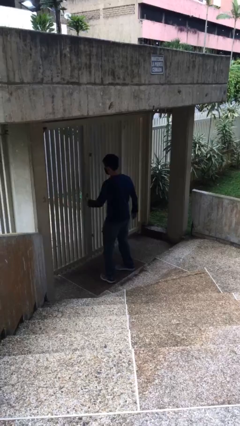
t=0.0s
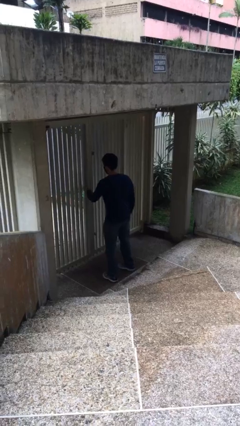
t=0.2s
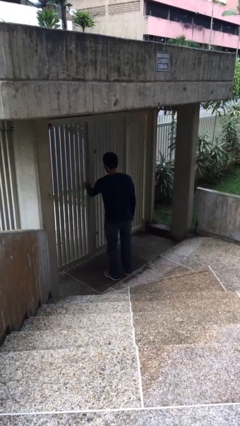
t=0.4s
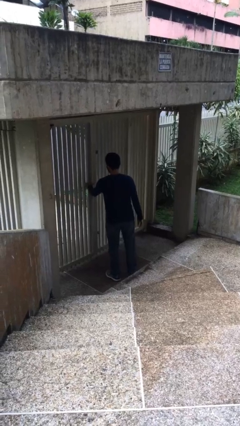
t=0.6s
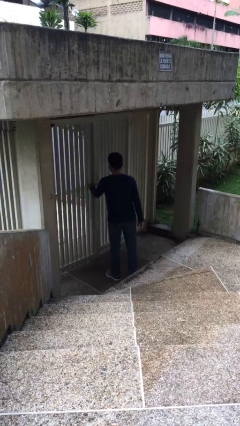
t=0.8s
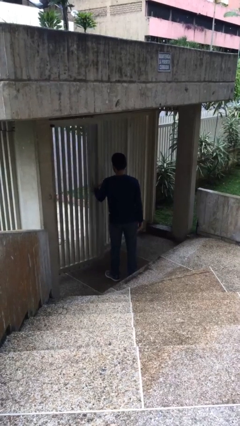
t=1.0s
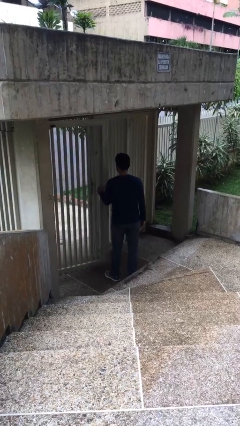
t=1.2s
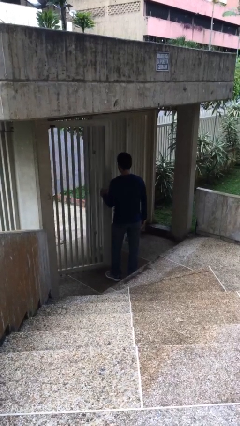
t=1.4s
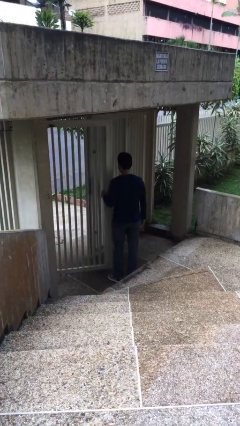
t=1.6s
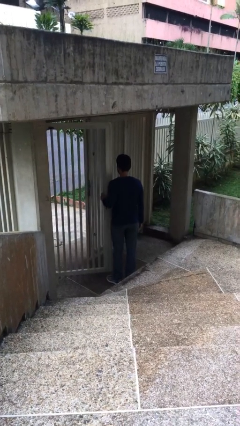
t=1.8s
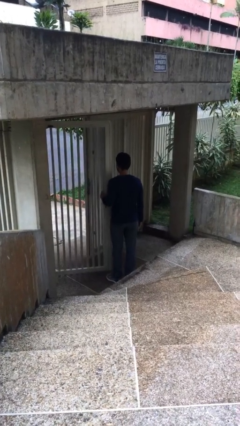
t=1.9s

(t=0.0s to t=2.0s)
person opens facility door

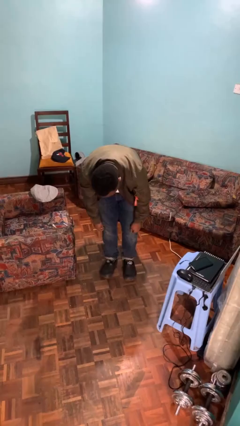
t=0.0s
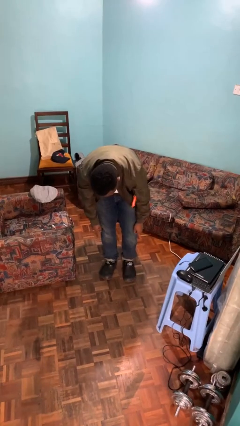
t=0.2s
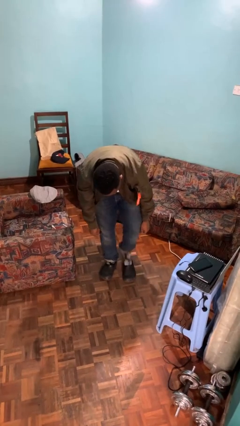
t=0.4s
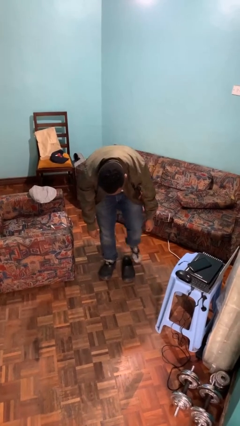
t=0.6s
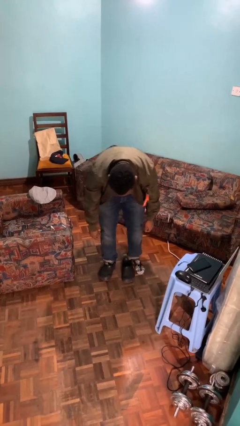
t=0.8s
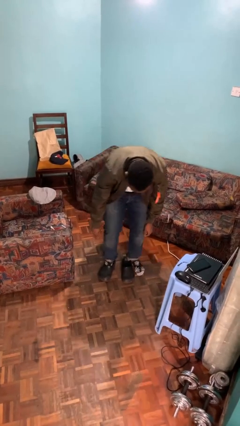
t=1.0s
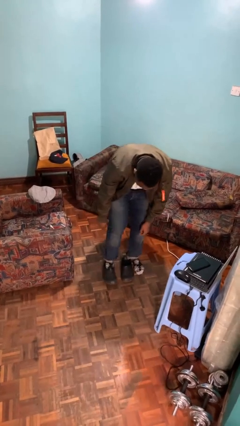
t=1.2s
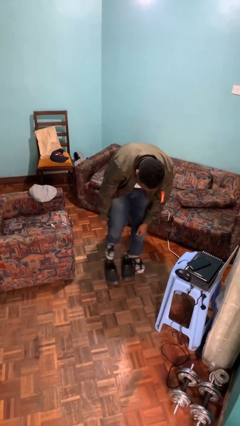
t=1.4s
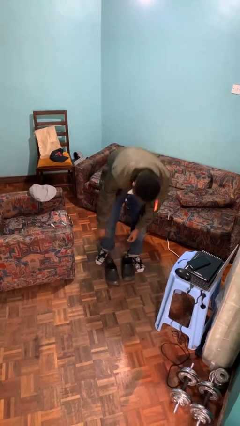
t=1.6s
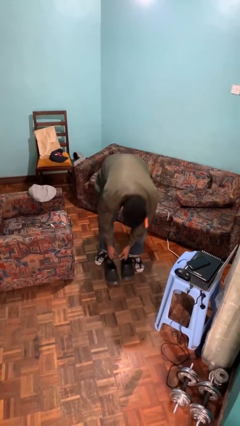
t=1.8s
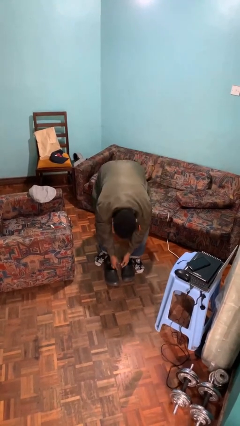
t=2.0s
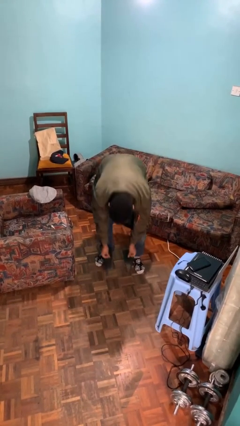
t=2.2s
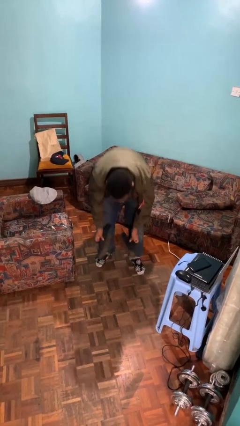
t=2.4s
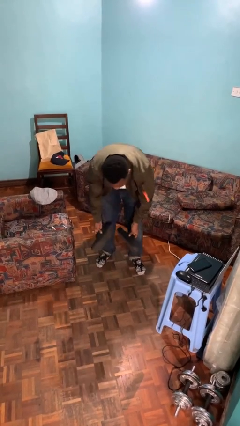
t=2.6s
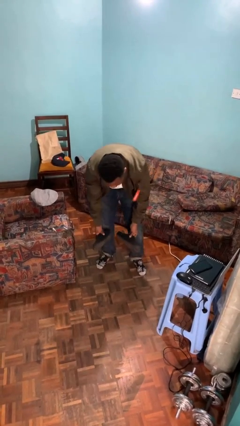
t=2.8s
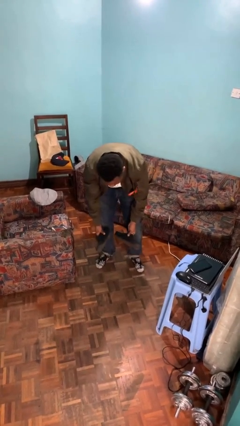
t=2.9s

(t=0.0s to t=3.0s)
person takes off shoes

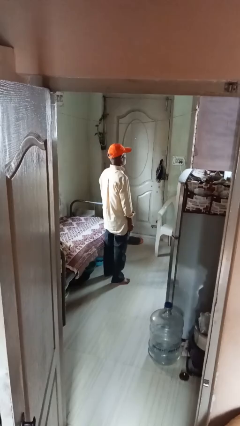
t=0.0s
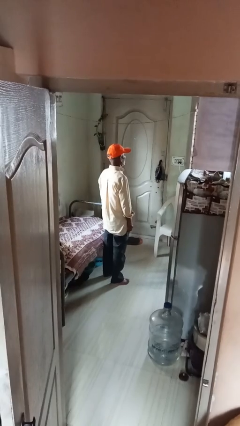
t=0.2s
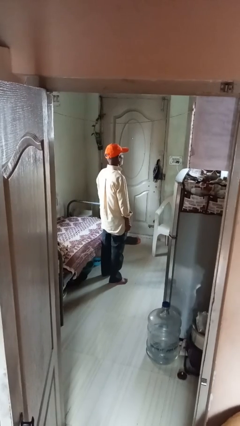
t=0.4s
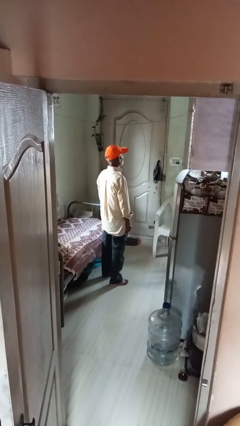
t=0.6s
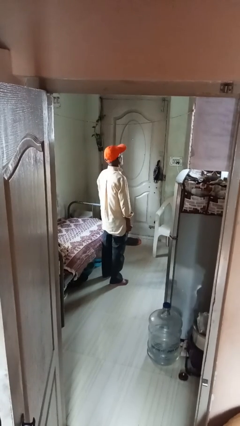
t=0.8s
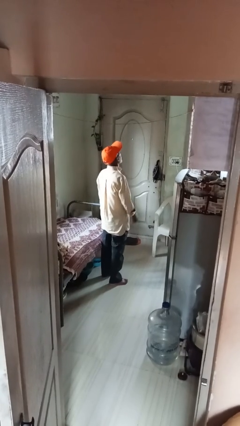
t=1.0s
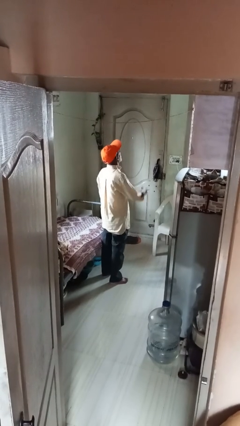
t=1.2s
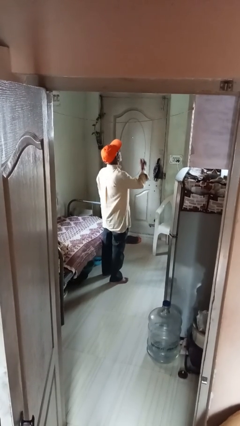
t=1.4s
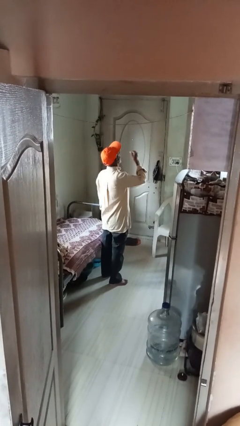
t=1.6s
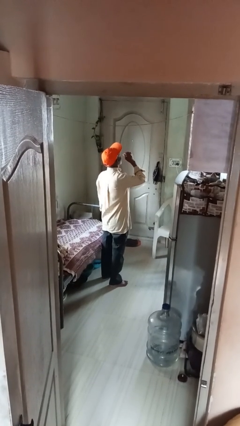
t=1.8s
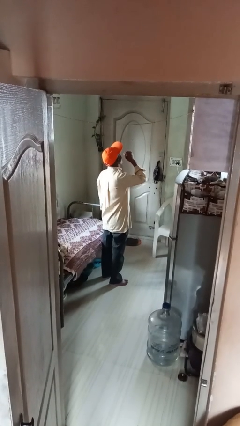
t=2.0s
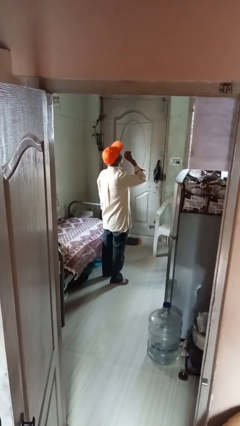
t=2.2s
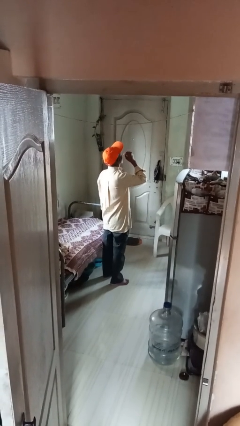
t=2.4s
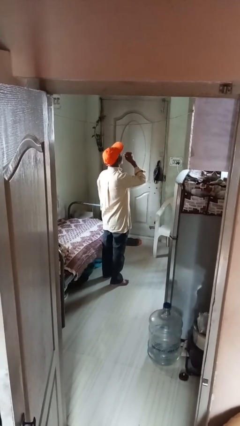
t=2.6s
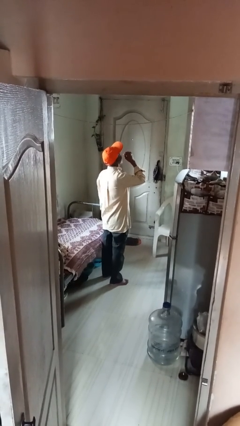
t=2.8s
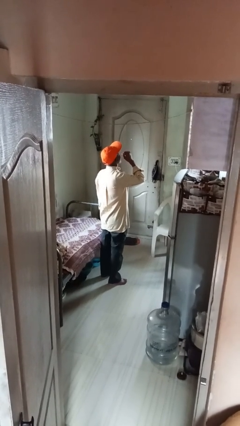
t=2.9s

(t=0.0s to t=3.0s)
person yawns

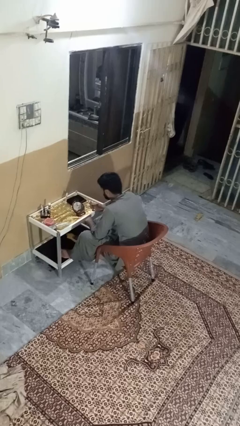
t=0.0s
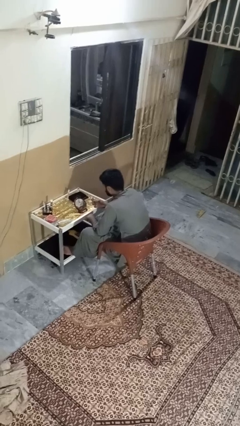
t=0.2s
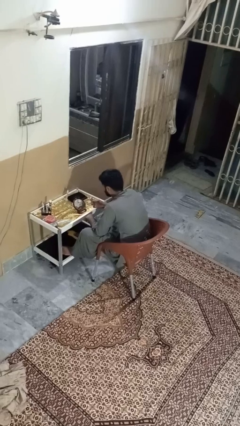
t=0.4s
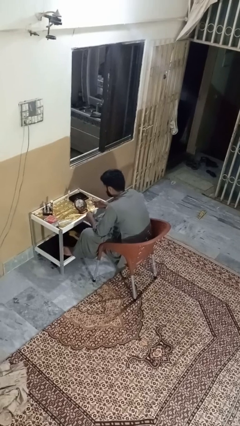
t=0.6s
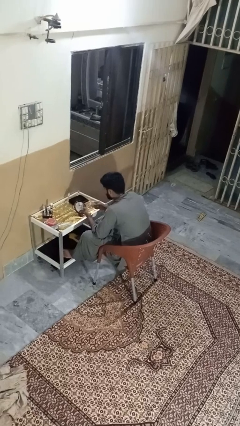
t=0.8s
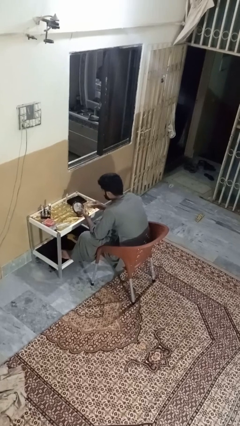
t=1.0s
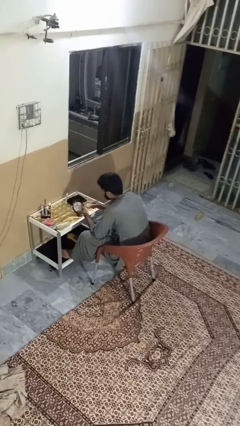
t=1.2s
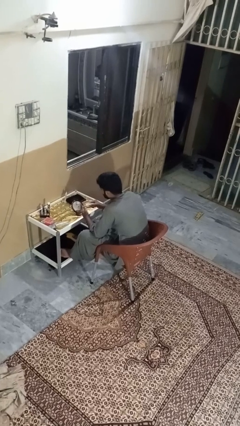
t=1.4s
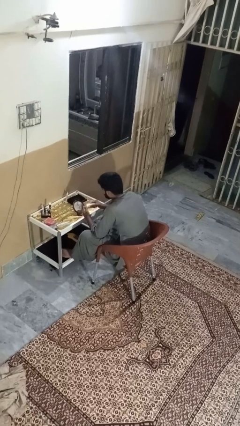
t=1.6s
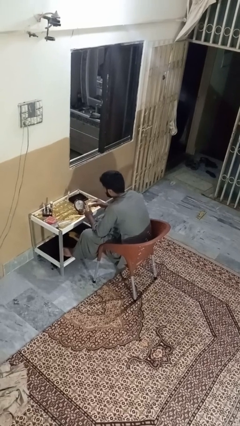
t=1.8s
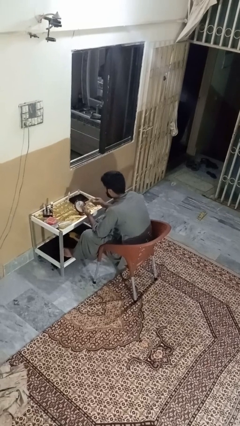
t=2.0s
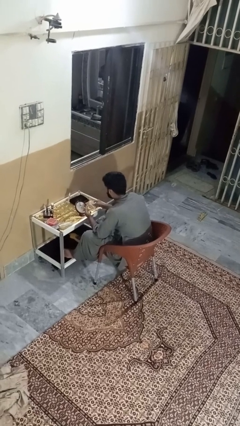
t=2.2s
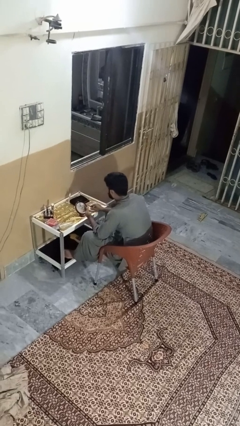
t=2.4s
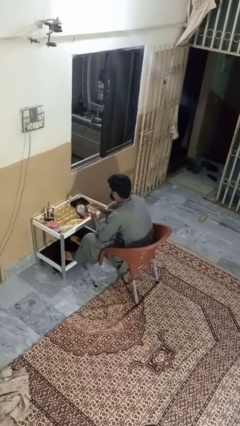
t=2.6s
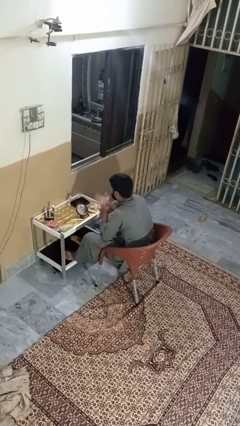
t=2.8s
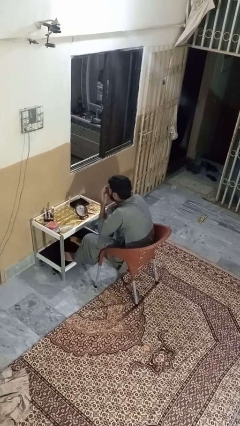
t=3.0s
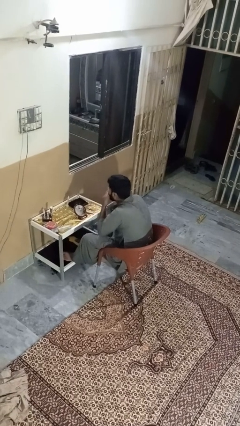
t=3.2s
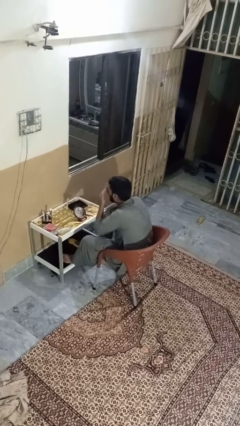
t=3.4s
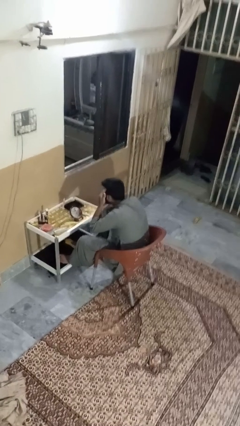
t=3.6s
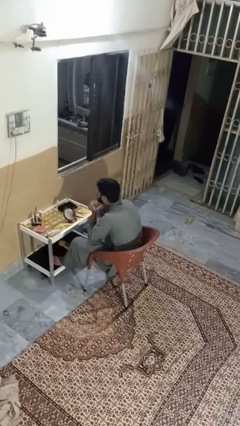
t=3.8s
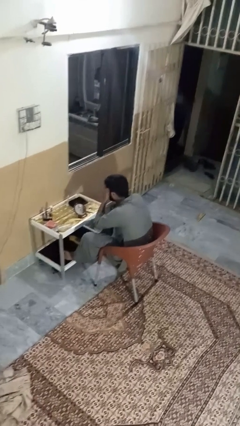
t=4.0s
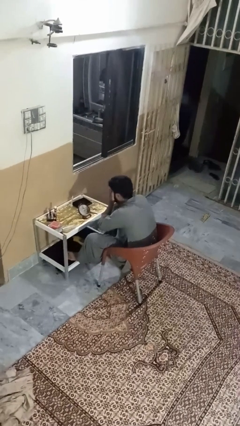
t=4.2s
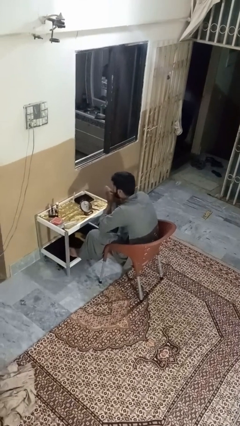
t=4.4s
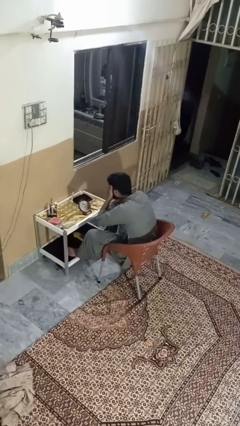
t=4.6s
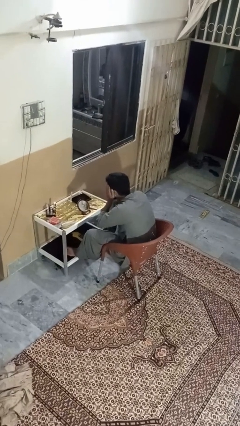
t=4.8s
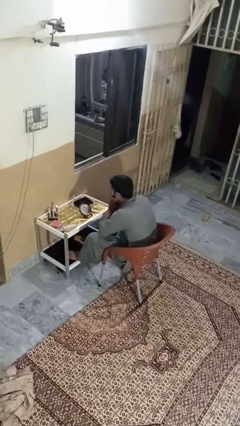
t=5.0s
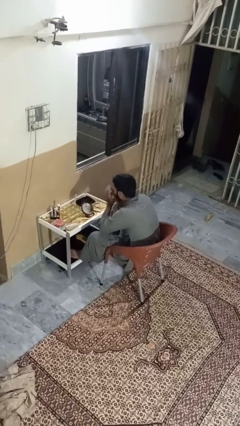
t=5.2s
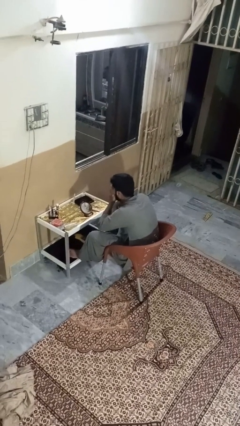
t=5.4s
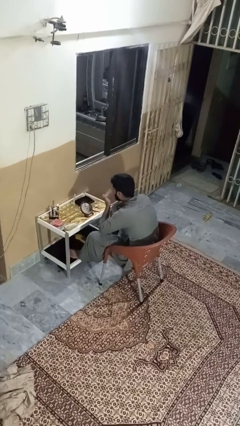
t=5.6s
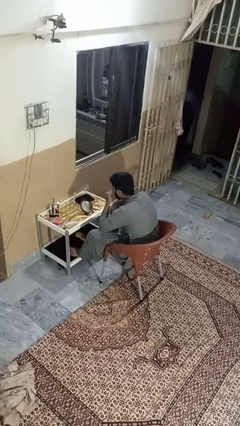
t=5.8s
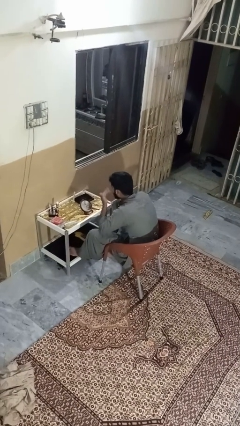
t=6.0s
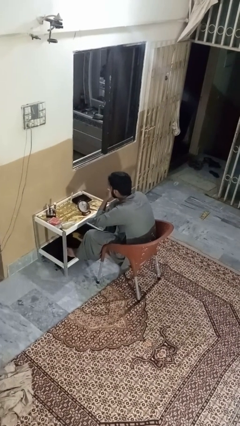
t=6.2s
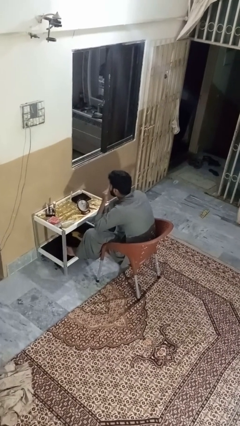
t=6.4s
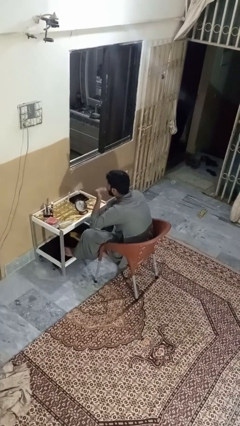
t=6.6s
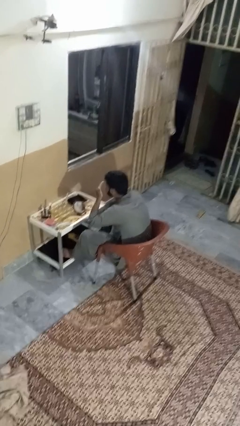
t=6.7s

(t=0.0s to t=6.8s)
person applies foundation makeup

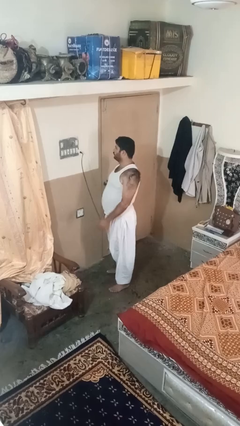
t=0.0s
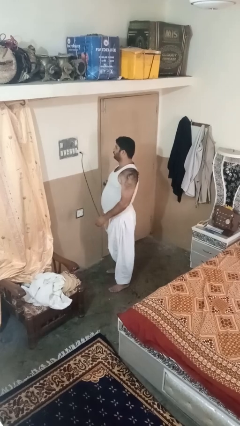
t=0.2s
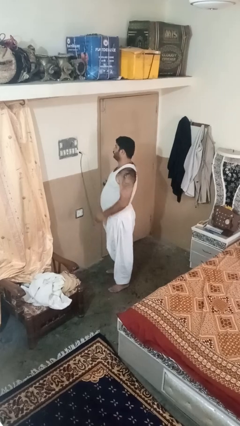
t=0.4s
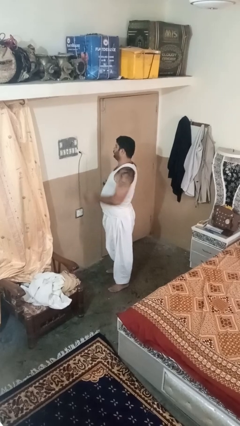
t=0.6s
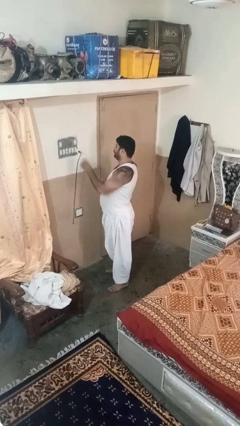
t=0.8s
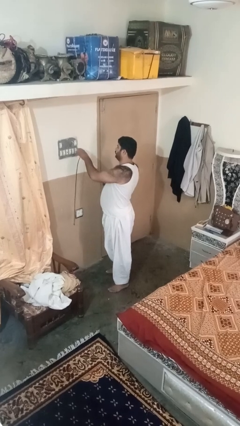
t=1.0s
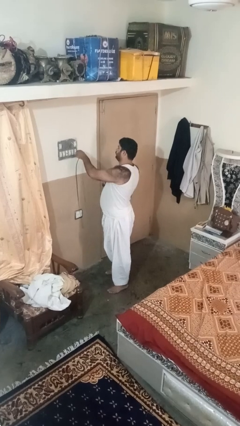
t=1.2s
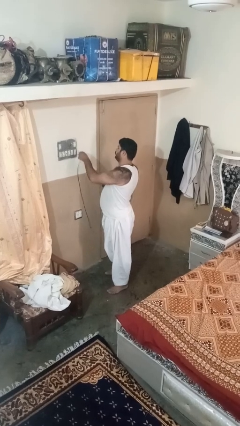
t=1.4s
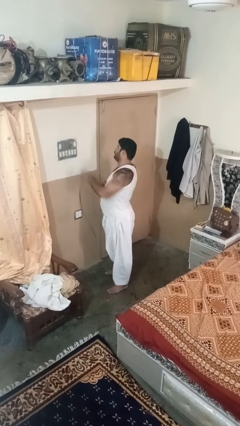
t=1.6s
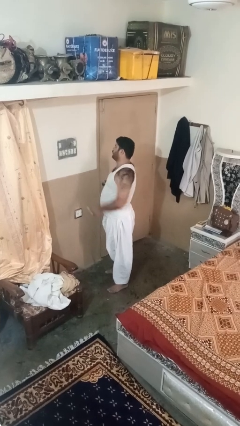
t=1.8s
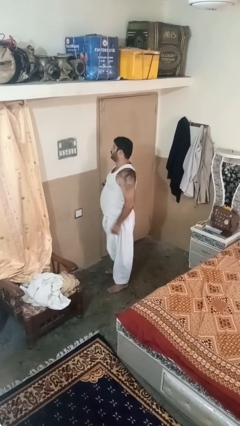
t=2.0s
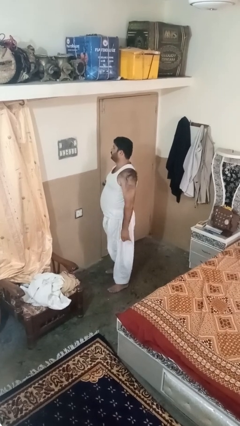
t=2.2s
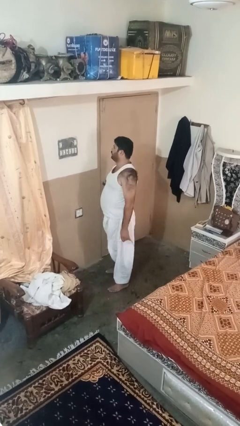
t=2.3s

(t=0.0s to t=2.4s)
person unplugs from electrical socket

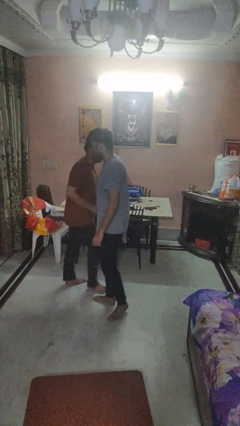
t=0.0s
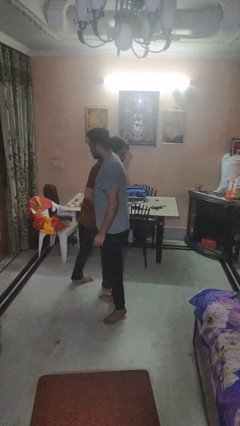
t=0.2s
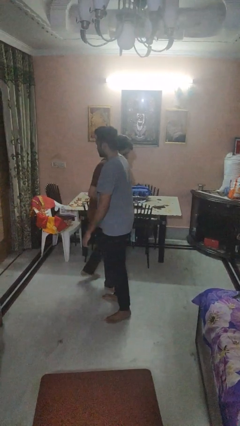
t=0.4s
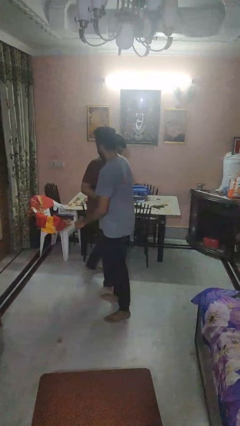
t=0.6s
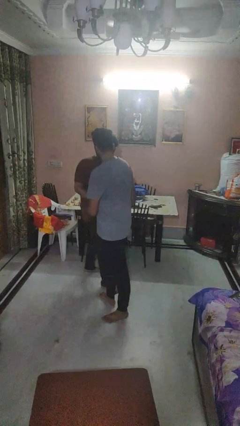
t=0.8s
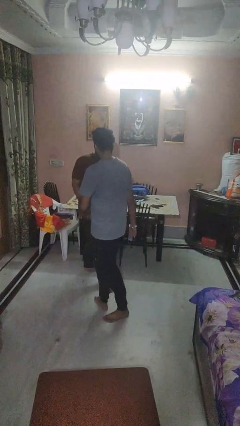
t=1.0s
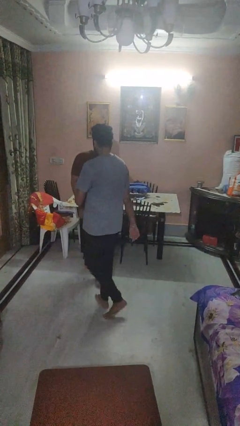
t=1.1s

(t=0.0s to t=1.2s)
person bumps into person
